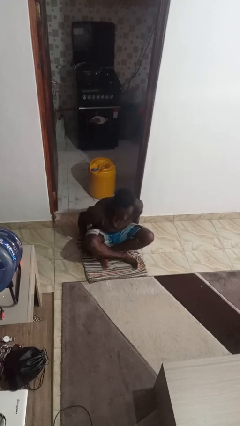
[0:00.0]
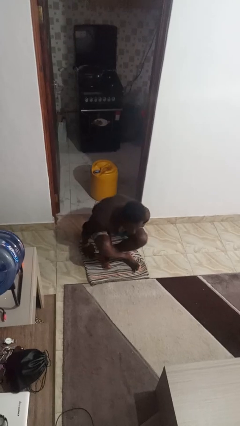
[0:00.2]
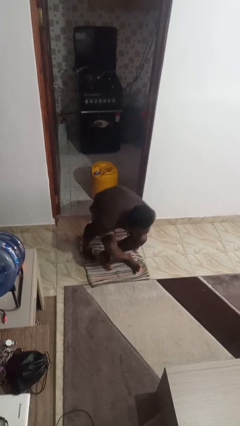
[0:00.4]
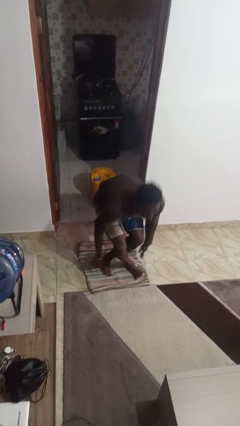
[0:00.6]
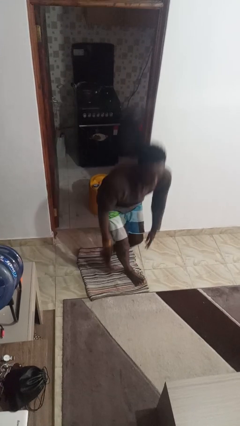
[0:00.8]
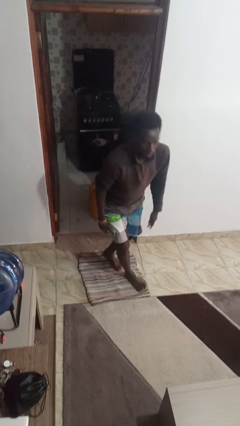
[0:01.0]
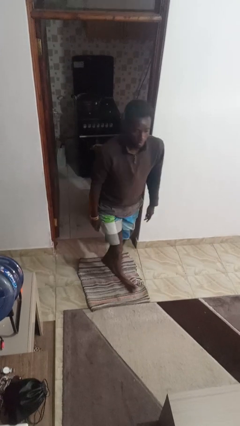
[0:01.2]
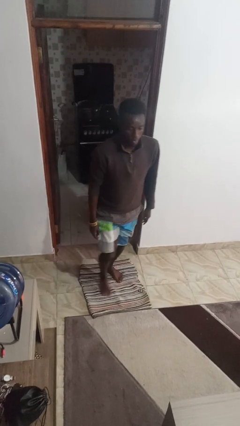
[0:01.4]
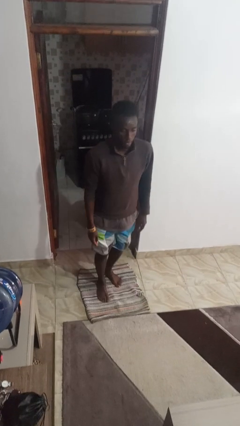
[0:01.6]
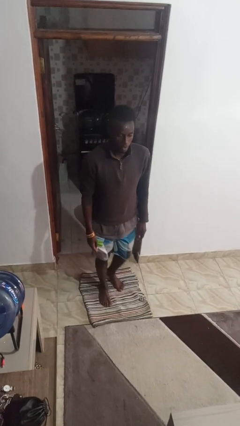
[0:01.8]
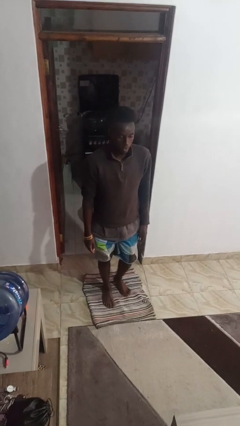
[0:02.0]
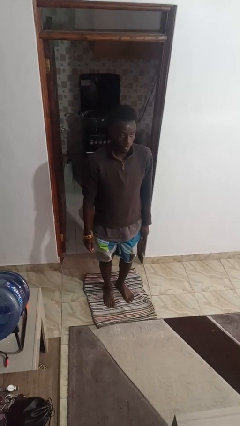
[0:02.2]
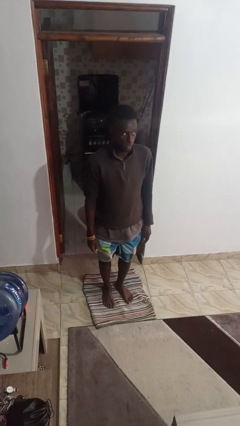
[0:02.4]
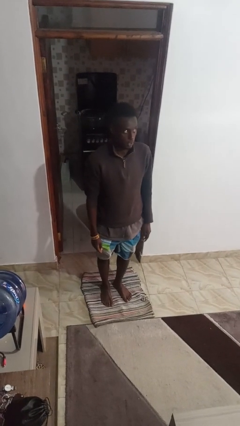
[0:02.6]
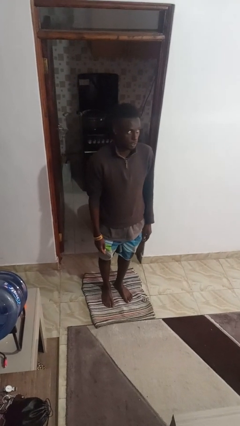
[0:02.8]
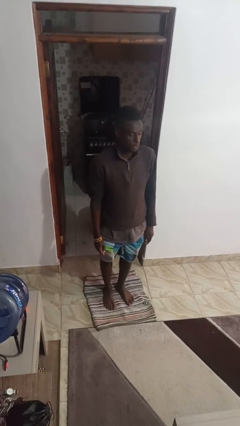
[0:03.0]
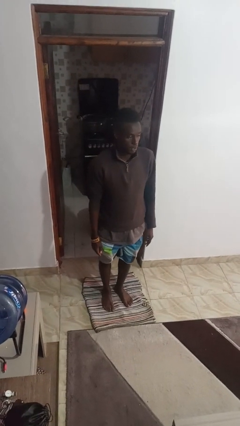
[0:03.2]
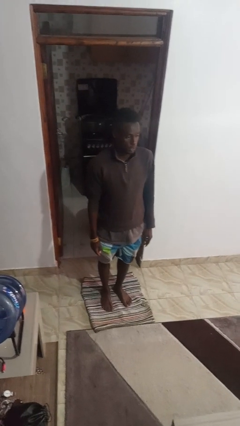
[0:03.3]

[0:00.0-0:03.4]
person stands up from floor

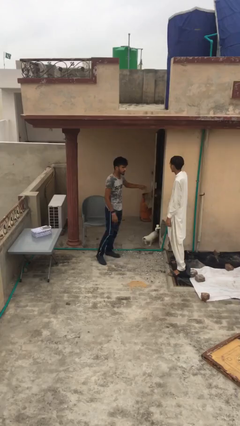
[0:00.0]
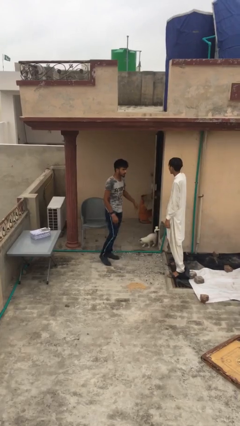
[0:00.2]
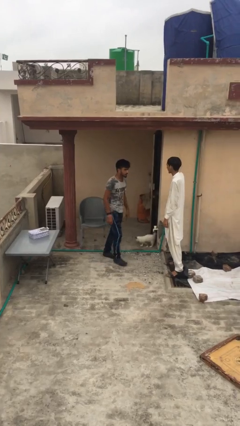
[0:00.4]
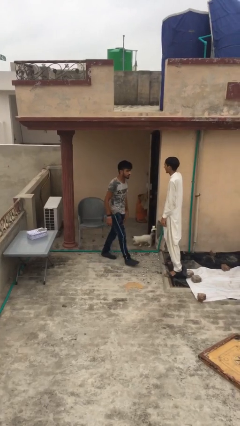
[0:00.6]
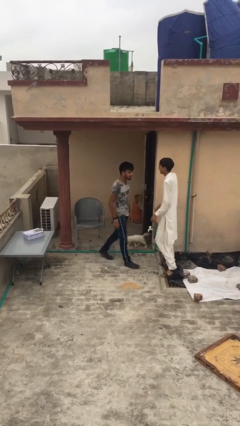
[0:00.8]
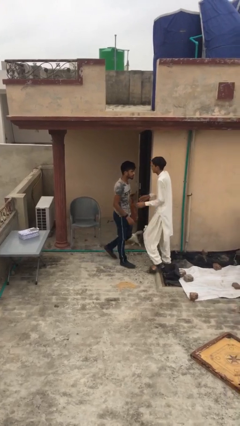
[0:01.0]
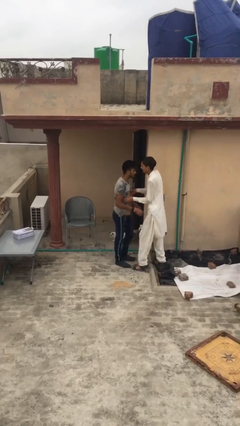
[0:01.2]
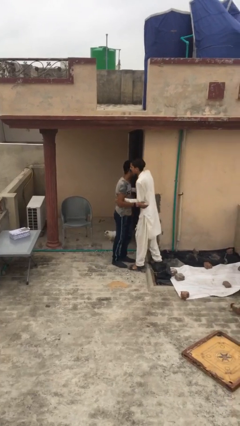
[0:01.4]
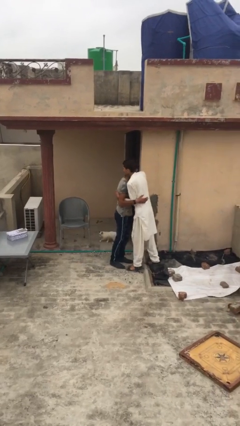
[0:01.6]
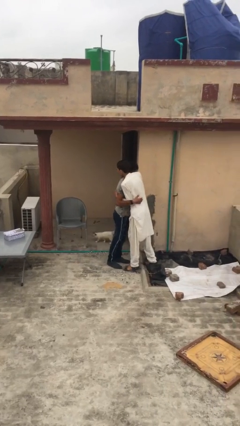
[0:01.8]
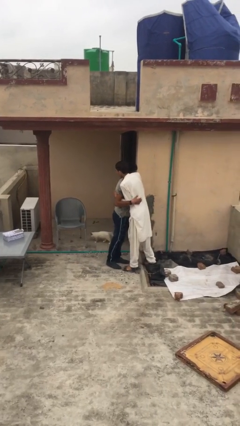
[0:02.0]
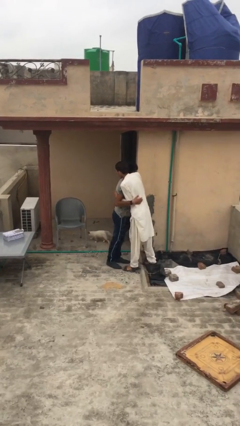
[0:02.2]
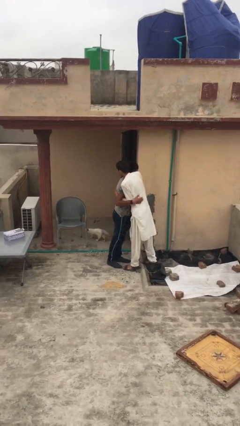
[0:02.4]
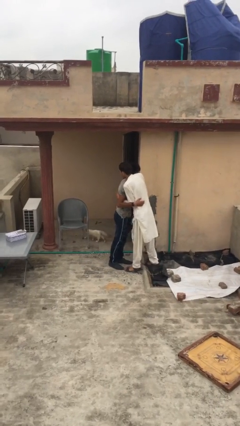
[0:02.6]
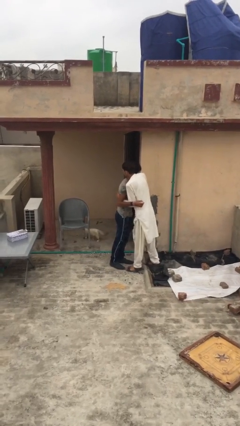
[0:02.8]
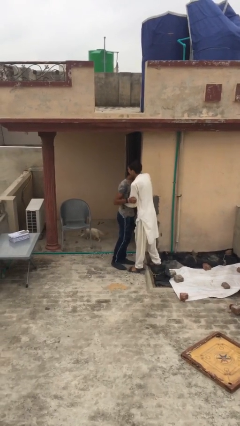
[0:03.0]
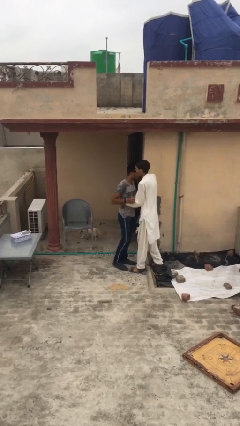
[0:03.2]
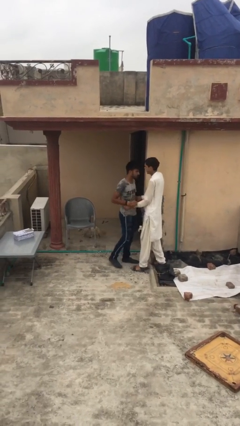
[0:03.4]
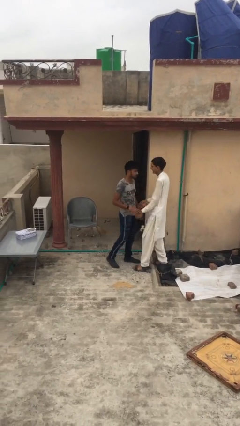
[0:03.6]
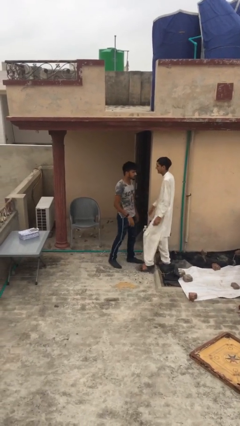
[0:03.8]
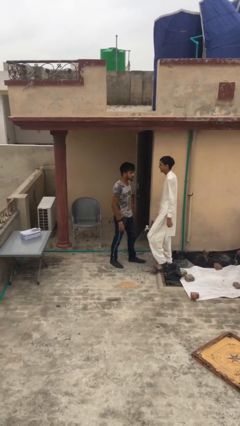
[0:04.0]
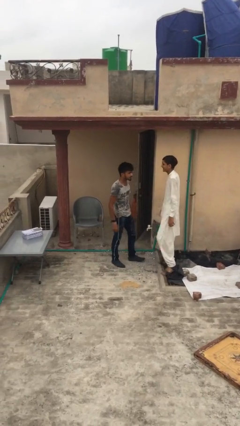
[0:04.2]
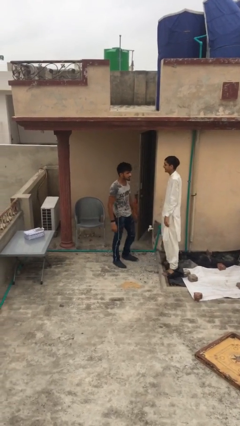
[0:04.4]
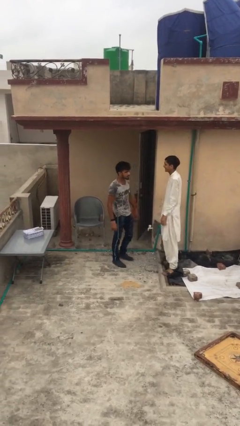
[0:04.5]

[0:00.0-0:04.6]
person embraces person

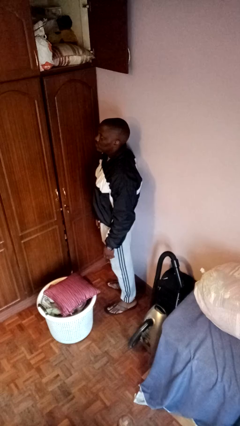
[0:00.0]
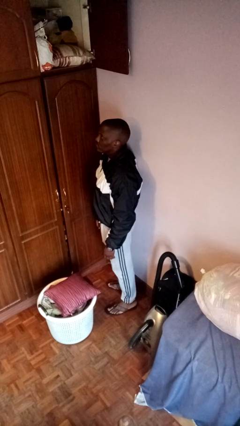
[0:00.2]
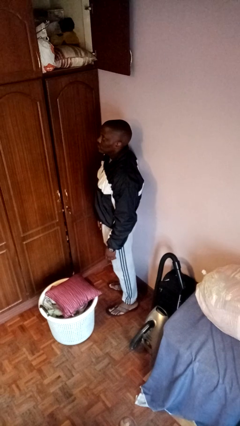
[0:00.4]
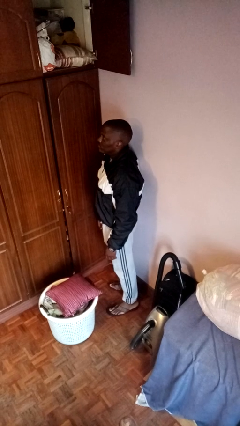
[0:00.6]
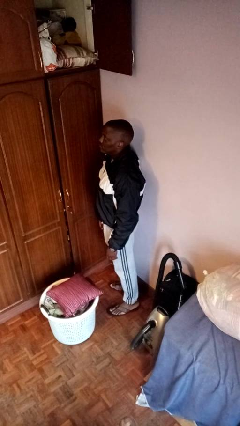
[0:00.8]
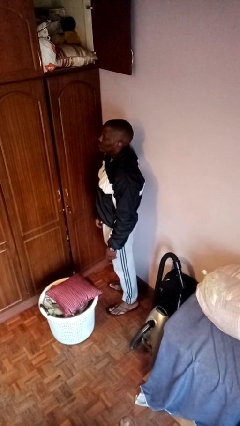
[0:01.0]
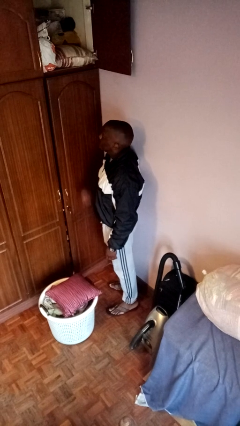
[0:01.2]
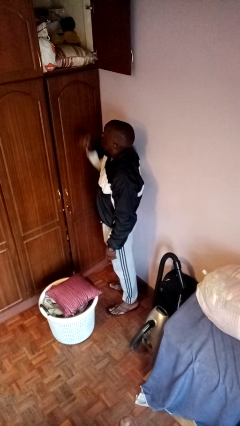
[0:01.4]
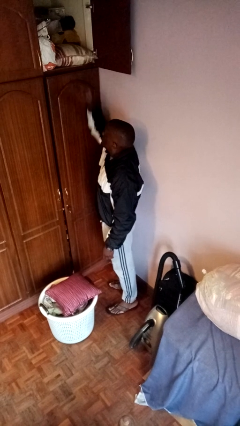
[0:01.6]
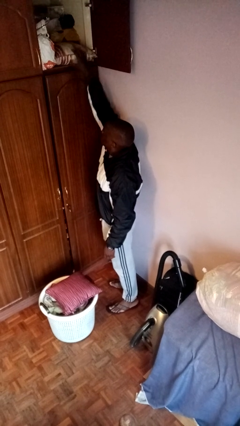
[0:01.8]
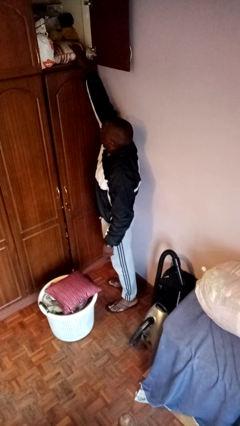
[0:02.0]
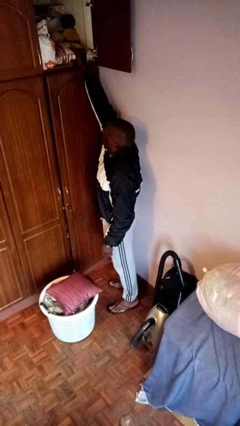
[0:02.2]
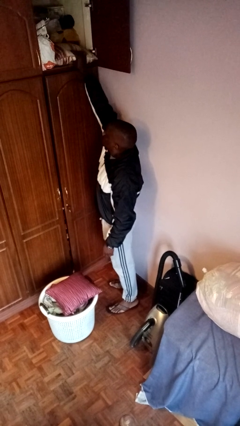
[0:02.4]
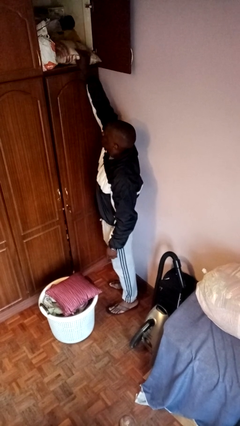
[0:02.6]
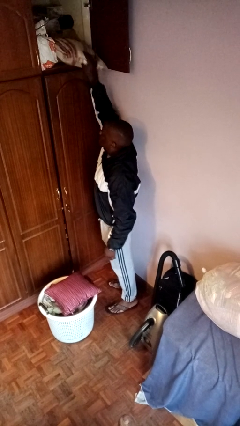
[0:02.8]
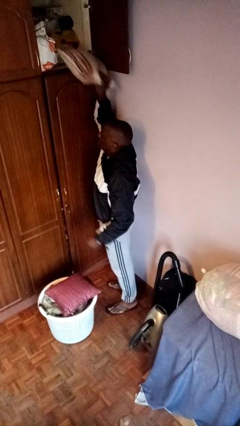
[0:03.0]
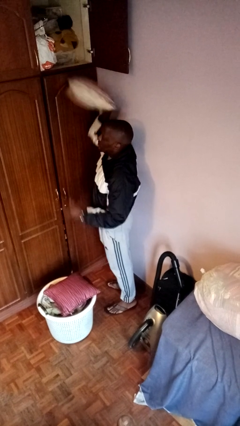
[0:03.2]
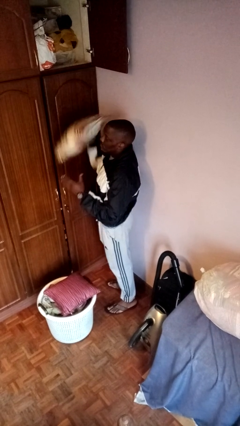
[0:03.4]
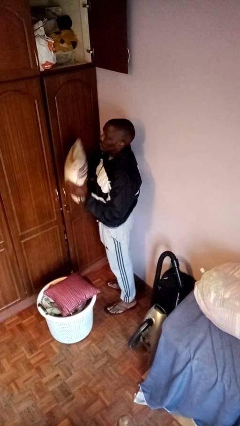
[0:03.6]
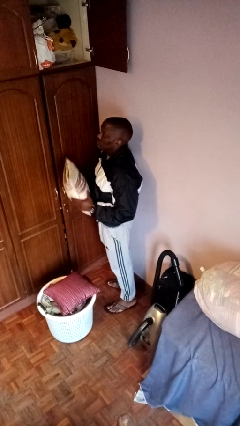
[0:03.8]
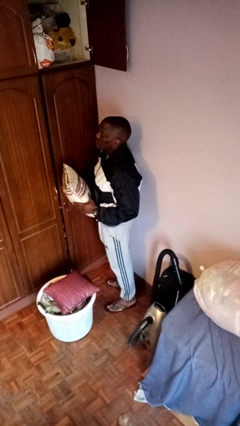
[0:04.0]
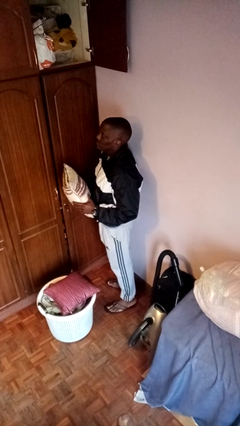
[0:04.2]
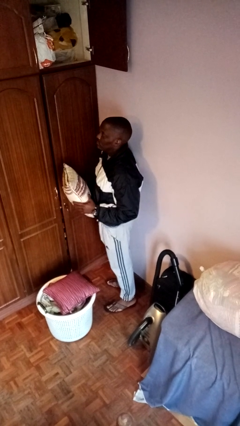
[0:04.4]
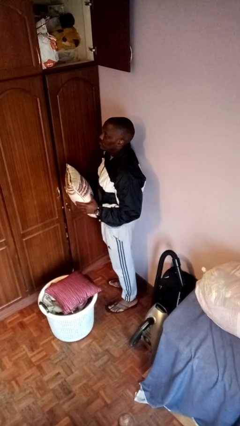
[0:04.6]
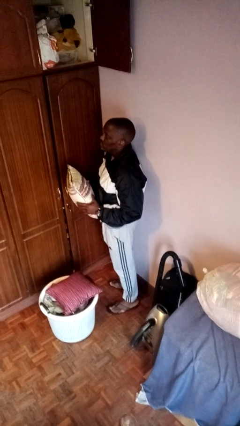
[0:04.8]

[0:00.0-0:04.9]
person picks up object from shelf

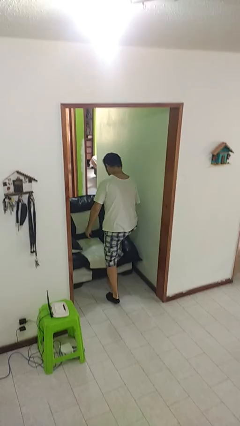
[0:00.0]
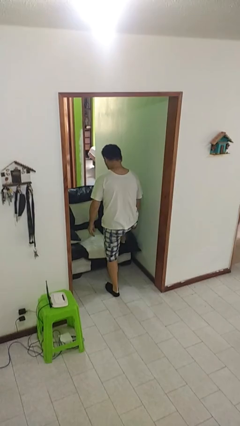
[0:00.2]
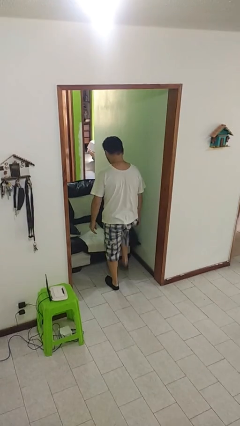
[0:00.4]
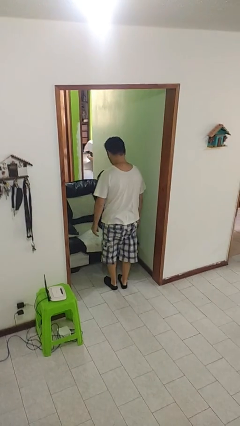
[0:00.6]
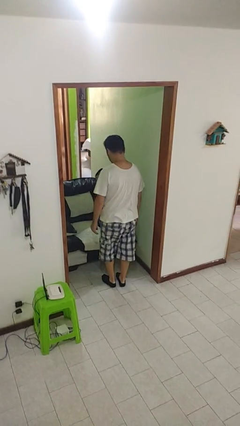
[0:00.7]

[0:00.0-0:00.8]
person climbs off couch

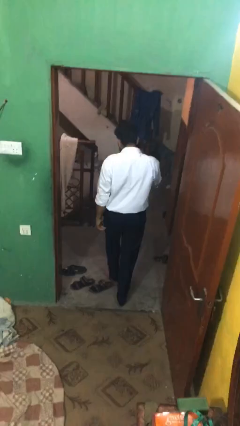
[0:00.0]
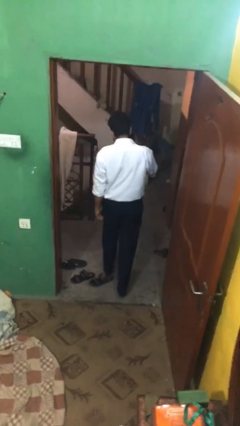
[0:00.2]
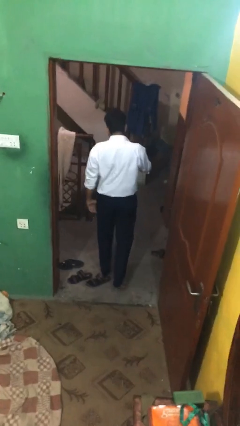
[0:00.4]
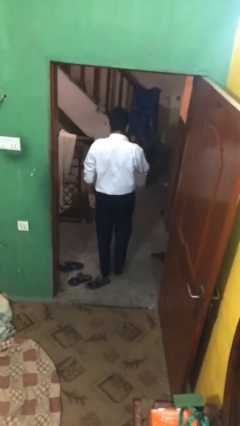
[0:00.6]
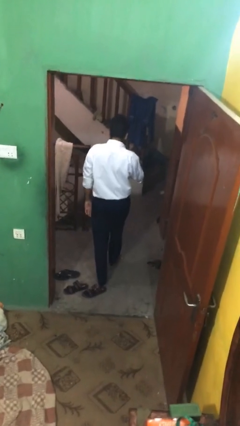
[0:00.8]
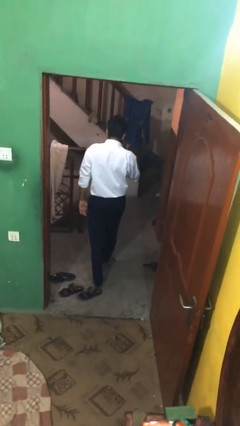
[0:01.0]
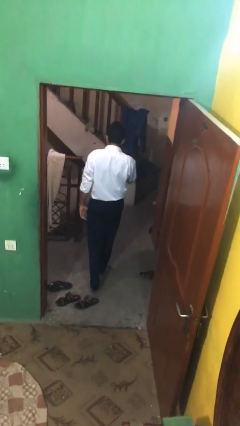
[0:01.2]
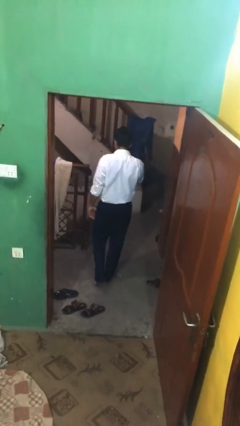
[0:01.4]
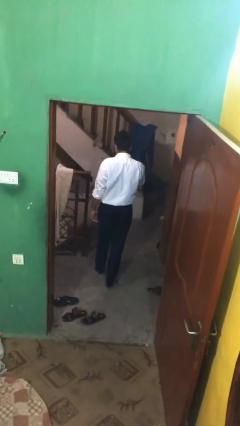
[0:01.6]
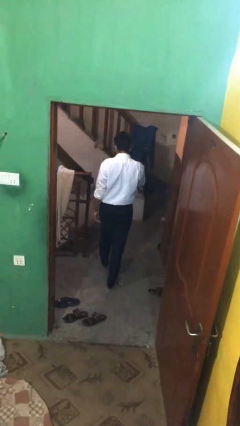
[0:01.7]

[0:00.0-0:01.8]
person exits scene through structure

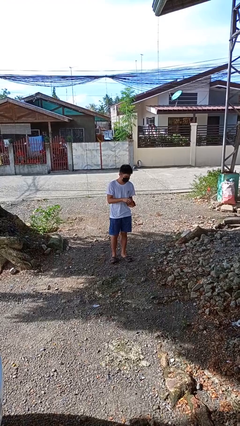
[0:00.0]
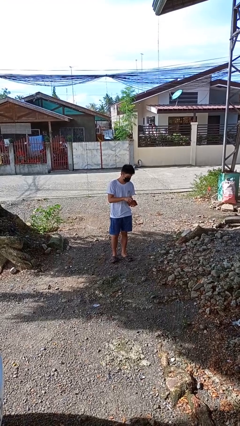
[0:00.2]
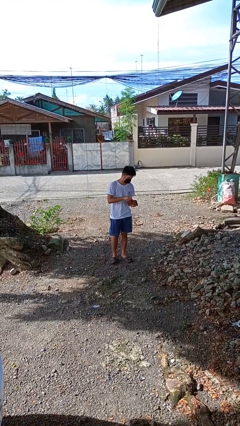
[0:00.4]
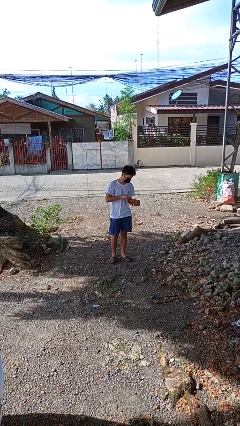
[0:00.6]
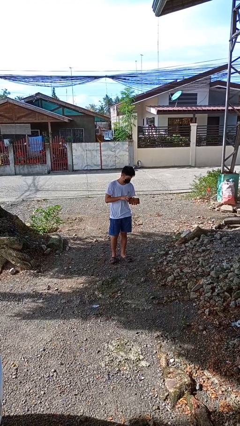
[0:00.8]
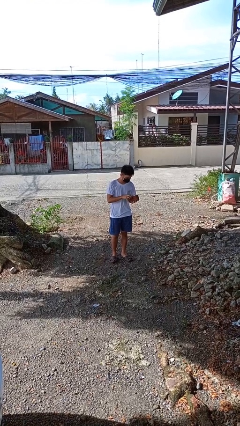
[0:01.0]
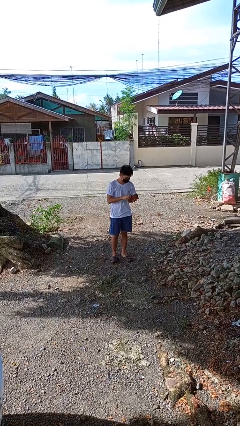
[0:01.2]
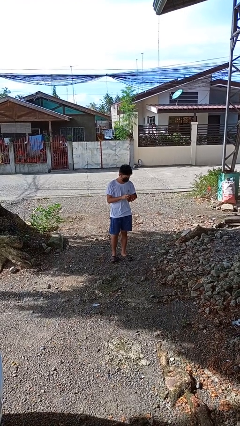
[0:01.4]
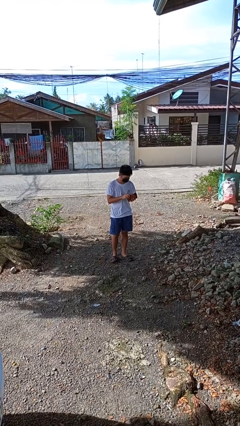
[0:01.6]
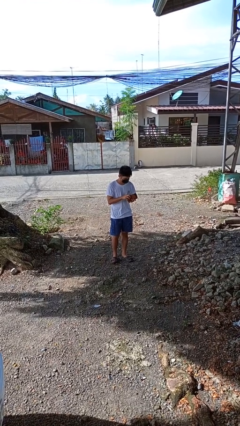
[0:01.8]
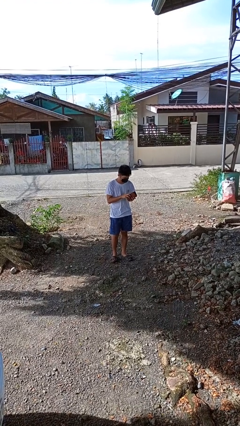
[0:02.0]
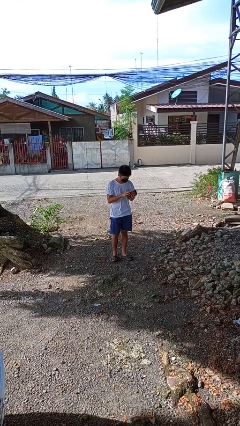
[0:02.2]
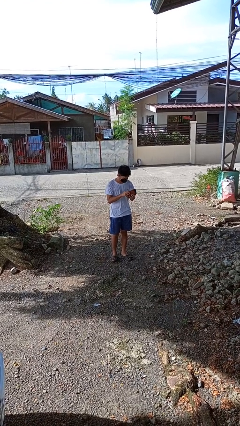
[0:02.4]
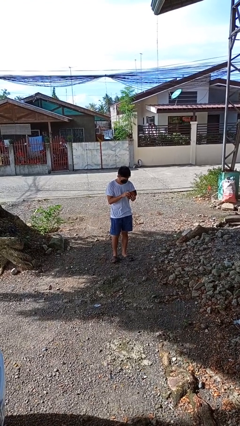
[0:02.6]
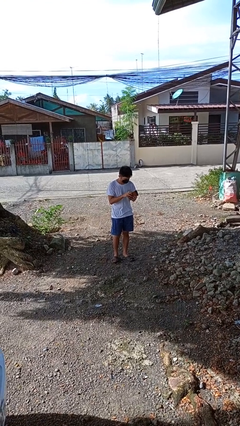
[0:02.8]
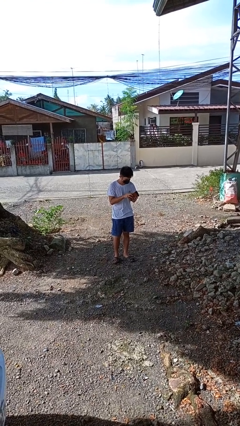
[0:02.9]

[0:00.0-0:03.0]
person searches in purse
